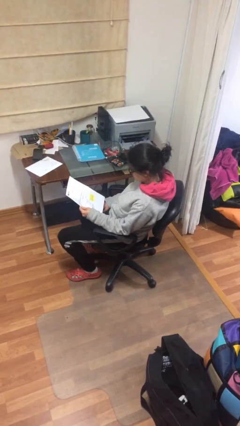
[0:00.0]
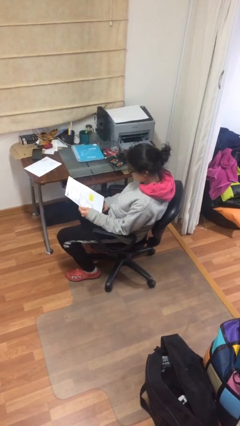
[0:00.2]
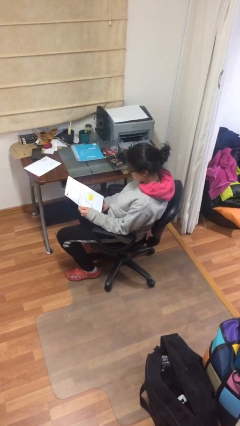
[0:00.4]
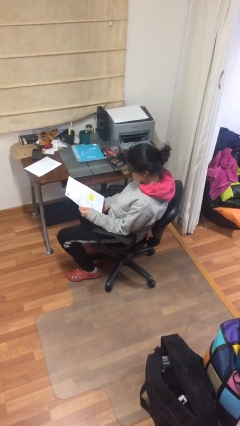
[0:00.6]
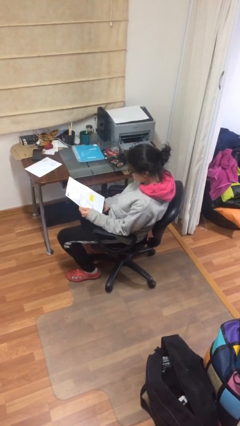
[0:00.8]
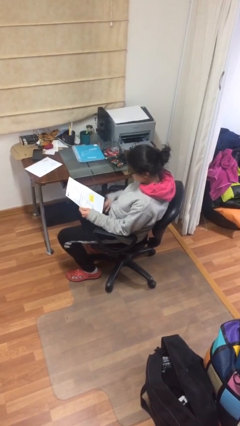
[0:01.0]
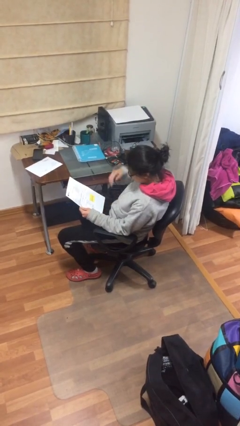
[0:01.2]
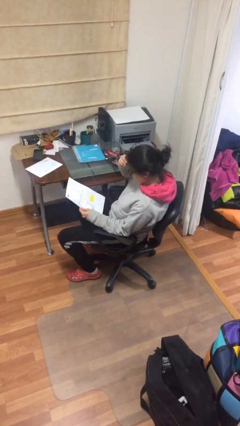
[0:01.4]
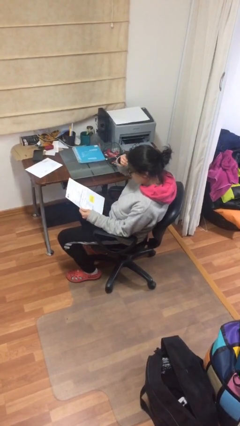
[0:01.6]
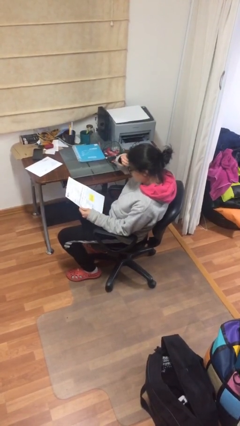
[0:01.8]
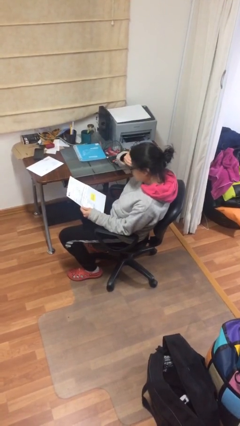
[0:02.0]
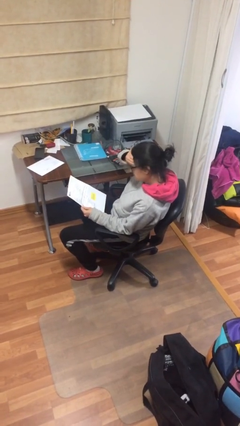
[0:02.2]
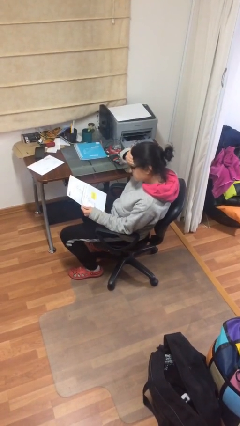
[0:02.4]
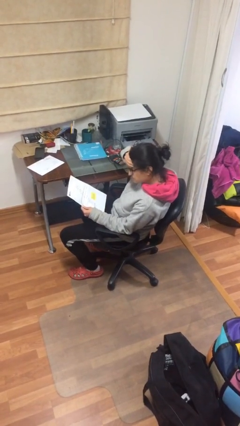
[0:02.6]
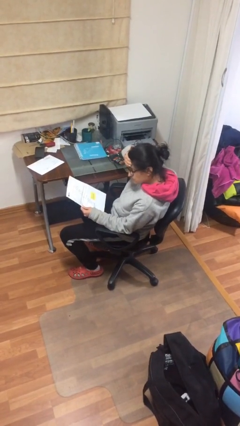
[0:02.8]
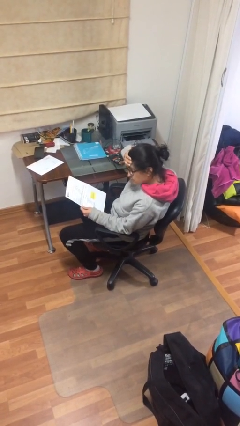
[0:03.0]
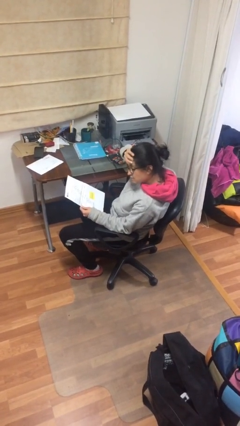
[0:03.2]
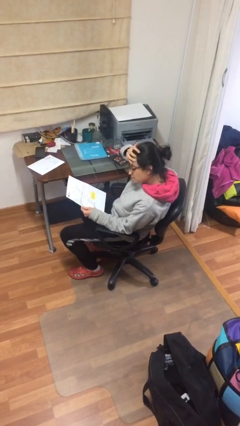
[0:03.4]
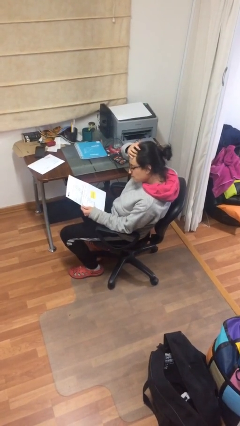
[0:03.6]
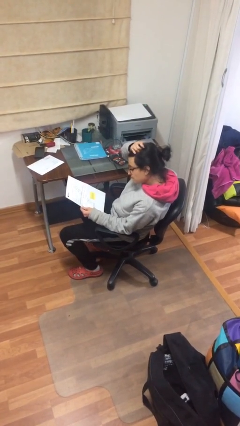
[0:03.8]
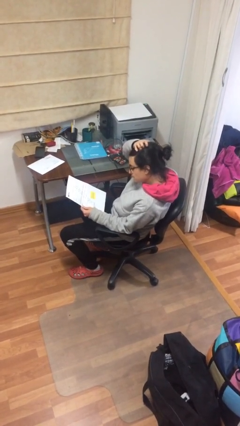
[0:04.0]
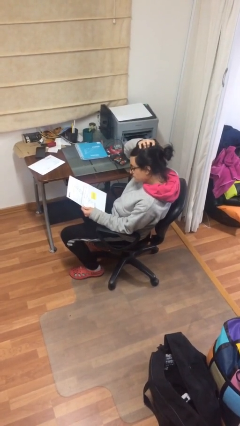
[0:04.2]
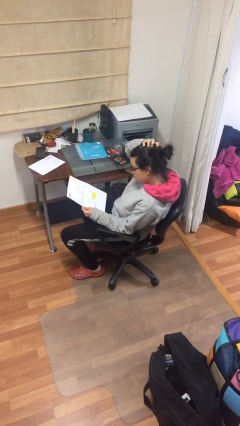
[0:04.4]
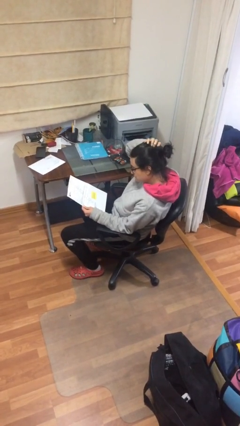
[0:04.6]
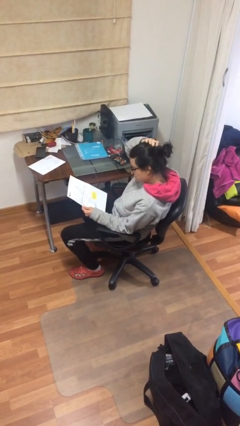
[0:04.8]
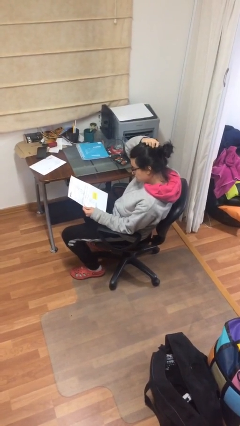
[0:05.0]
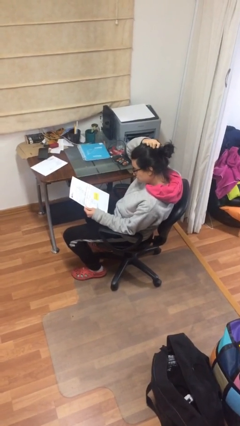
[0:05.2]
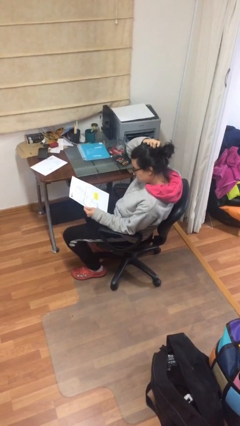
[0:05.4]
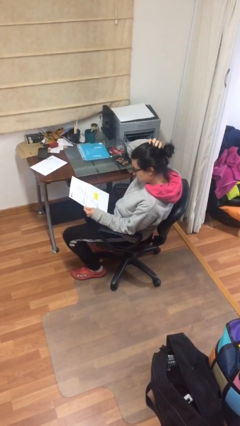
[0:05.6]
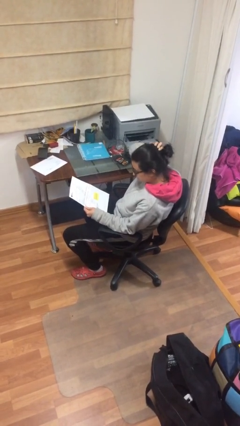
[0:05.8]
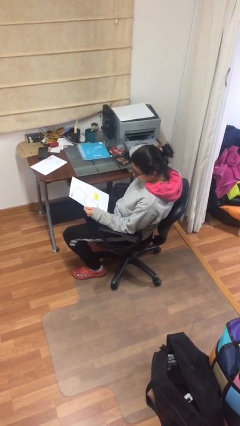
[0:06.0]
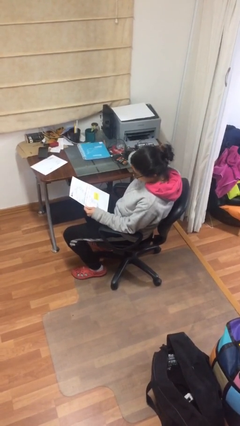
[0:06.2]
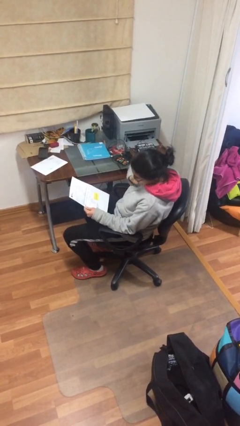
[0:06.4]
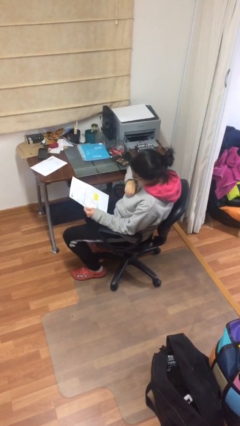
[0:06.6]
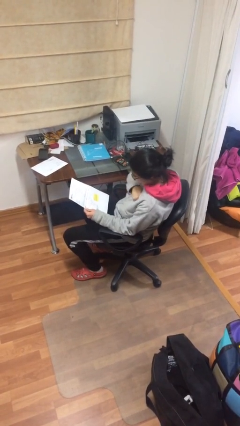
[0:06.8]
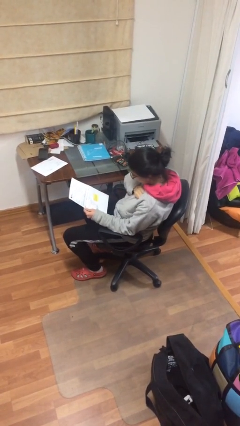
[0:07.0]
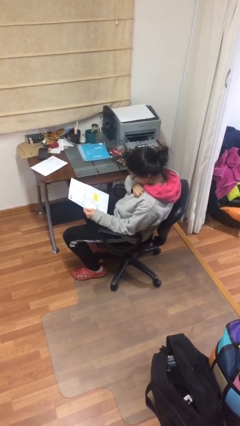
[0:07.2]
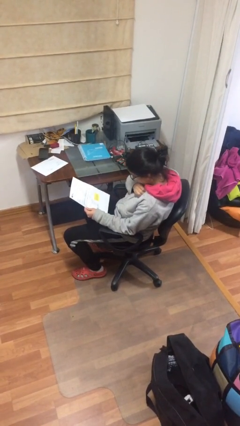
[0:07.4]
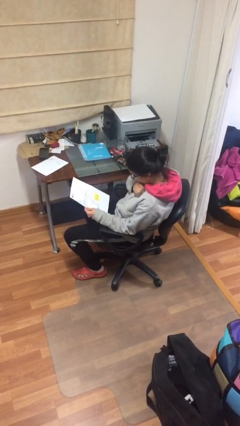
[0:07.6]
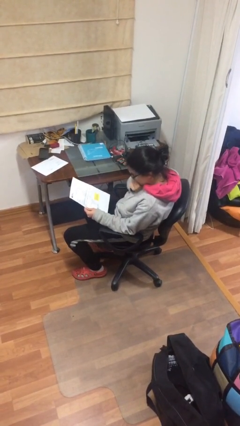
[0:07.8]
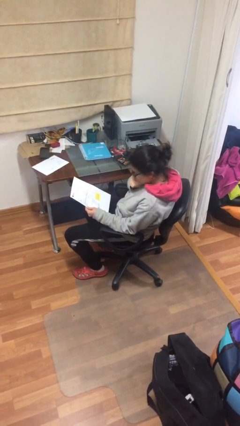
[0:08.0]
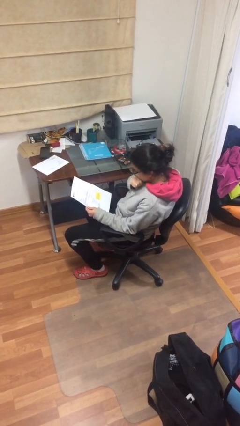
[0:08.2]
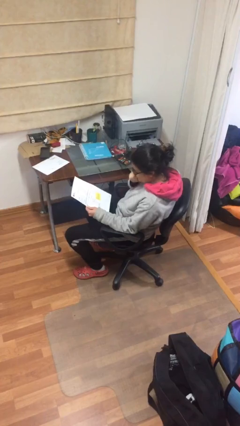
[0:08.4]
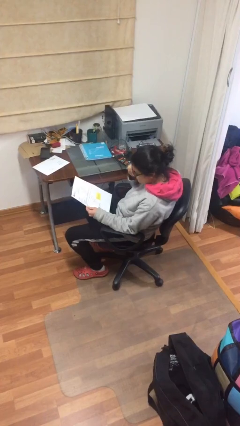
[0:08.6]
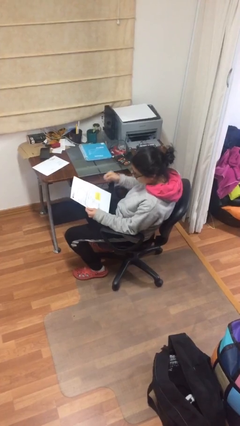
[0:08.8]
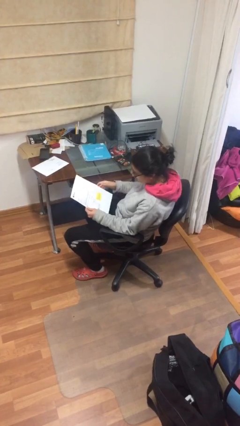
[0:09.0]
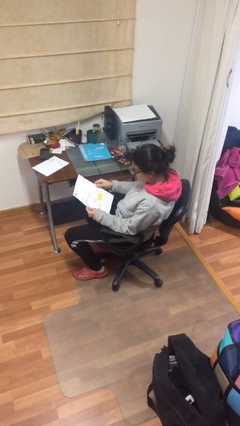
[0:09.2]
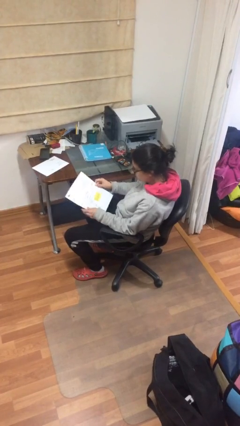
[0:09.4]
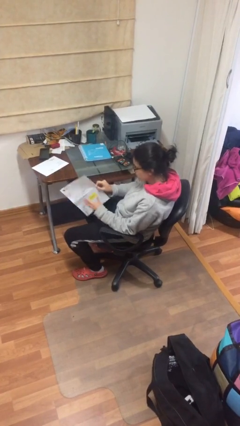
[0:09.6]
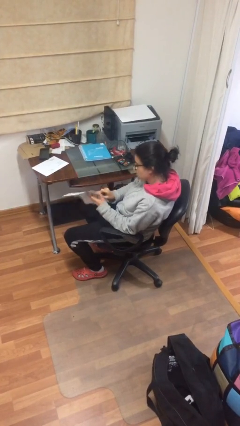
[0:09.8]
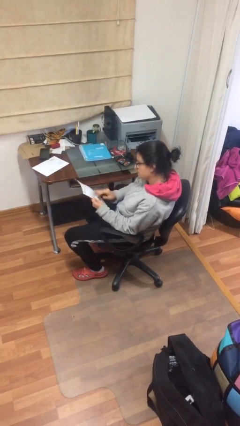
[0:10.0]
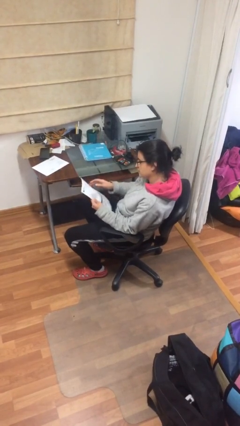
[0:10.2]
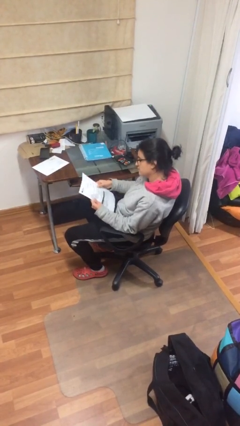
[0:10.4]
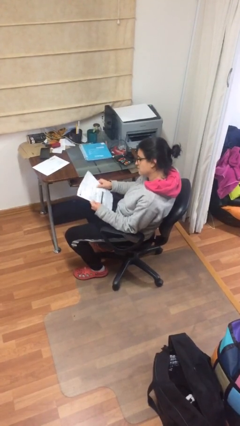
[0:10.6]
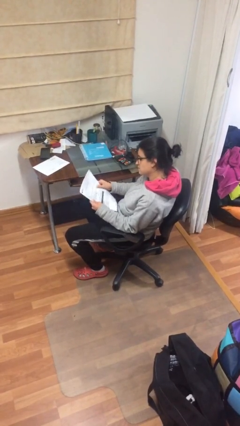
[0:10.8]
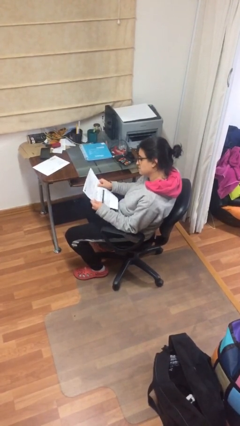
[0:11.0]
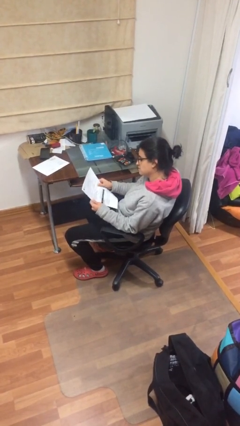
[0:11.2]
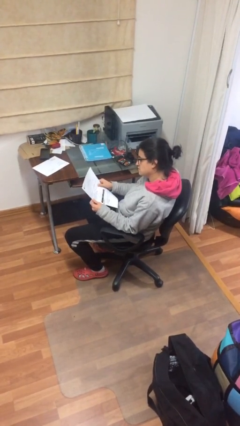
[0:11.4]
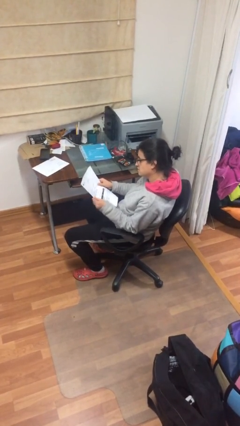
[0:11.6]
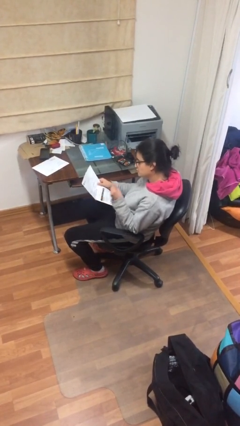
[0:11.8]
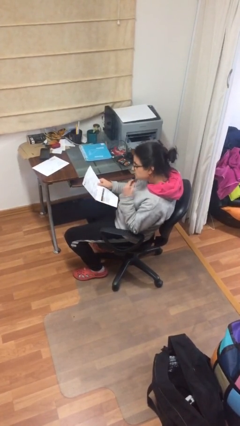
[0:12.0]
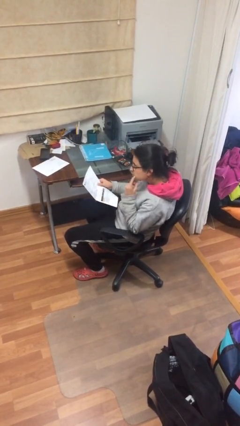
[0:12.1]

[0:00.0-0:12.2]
person reads document

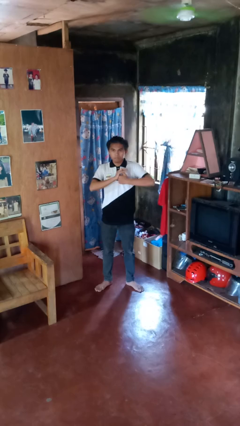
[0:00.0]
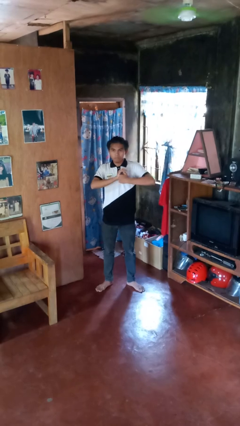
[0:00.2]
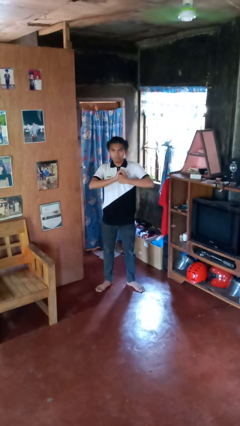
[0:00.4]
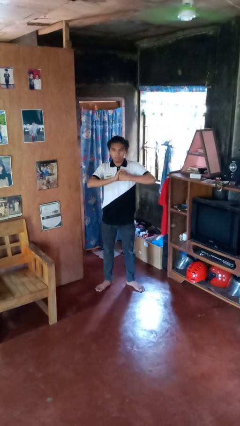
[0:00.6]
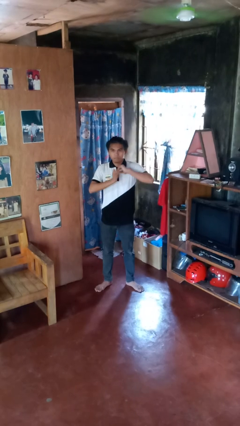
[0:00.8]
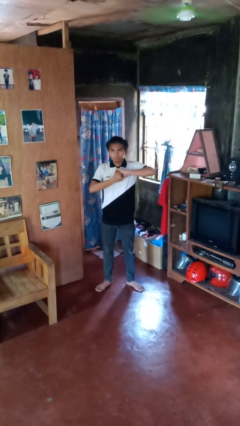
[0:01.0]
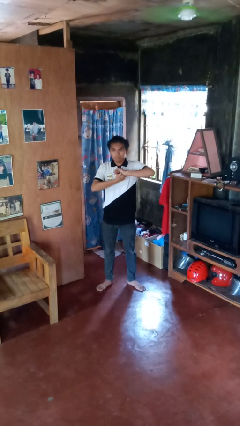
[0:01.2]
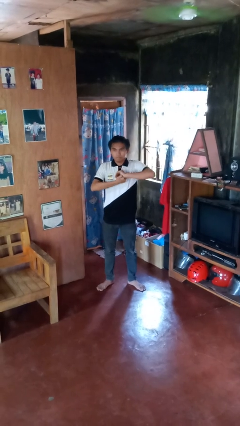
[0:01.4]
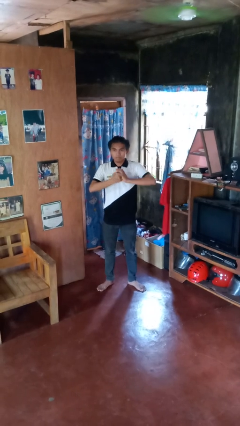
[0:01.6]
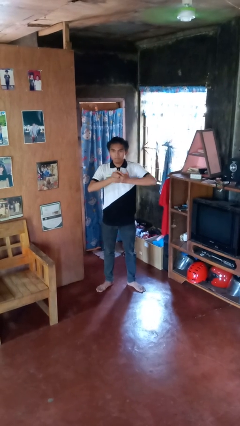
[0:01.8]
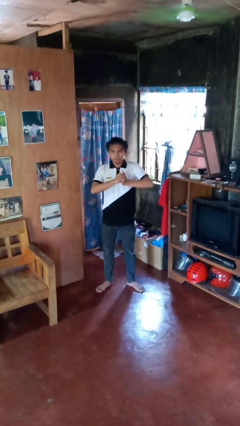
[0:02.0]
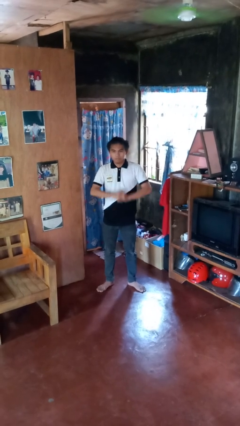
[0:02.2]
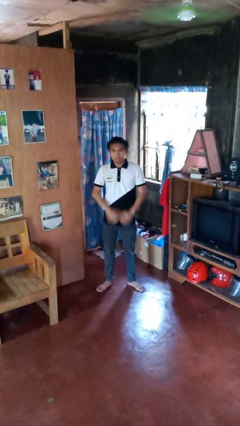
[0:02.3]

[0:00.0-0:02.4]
person cracks knuckles

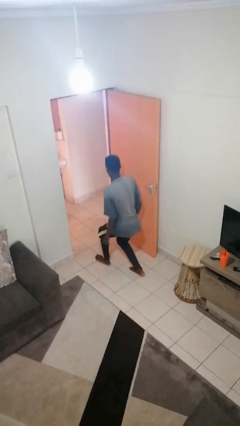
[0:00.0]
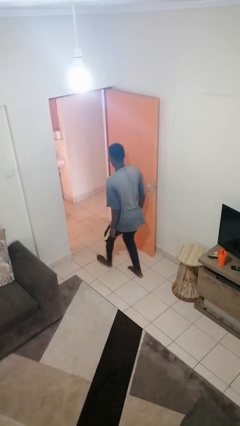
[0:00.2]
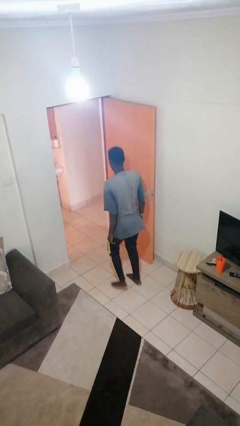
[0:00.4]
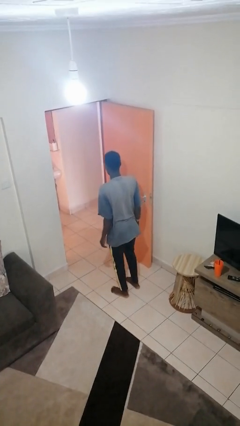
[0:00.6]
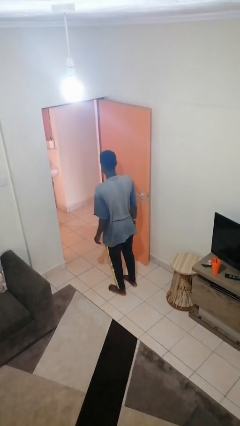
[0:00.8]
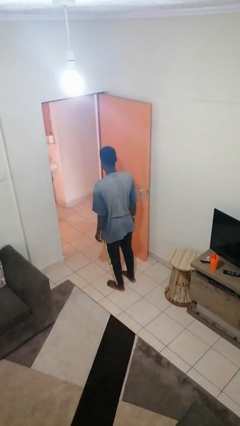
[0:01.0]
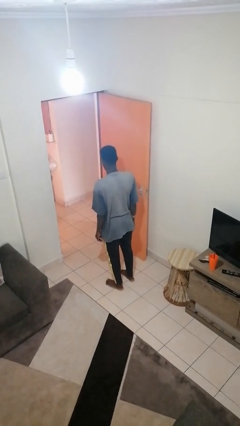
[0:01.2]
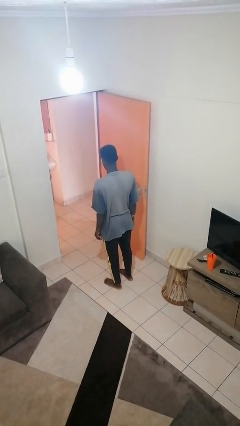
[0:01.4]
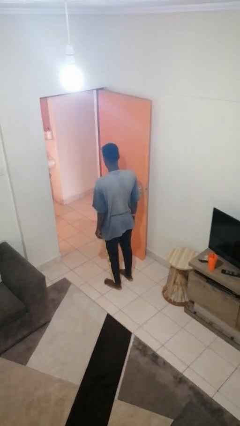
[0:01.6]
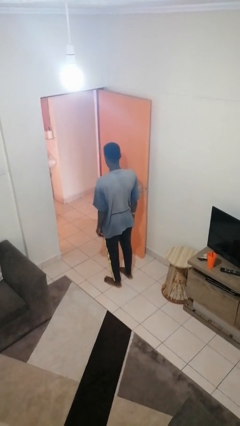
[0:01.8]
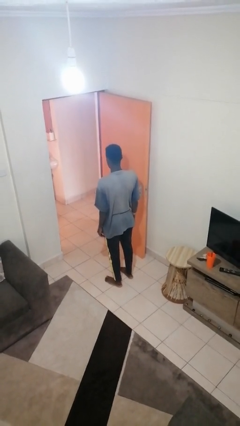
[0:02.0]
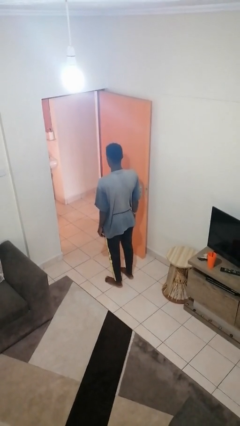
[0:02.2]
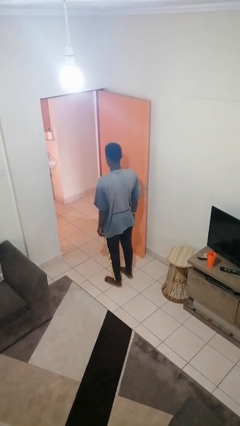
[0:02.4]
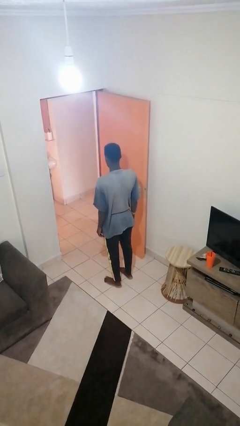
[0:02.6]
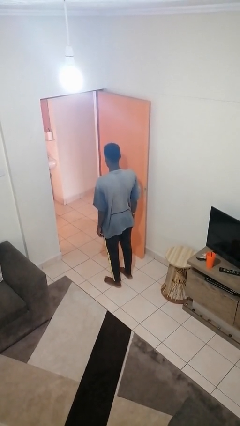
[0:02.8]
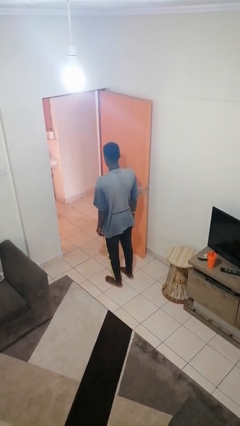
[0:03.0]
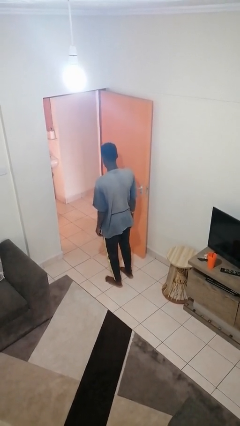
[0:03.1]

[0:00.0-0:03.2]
person stands up from floor

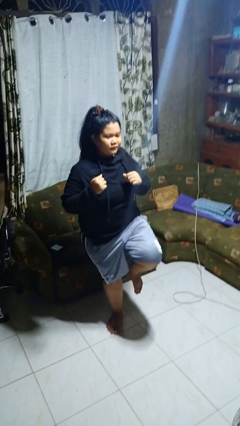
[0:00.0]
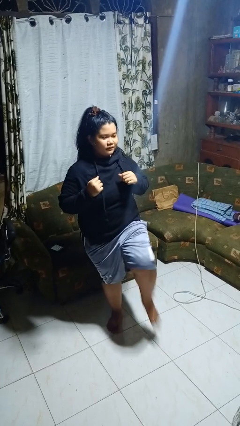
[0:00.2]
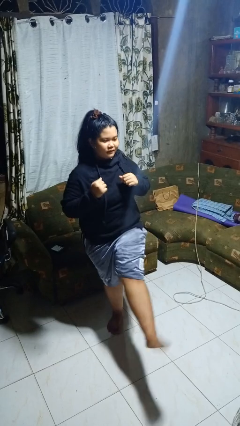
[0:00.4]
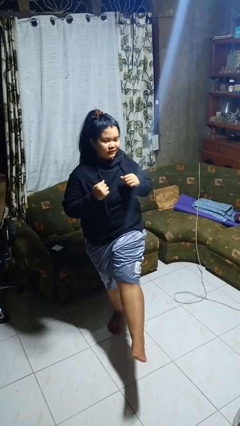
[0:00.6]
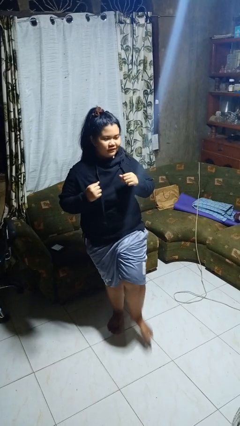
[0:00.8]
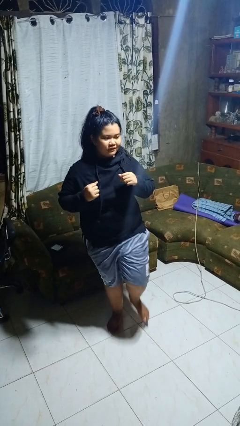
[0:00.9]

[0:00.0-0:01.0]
person karate kicks
